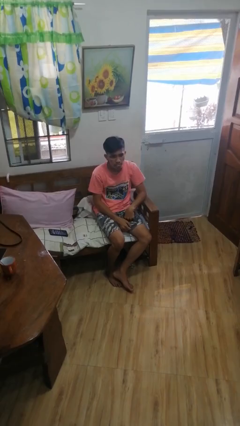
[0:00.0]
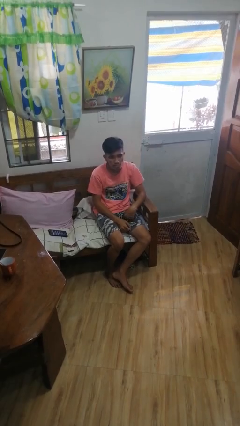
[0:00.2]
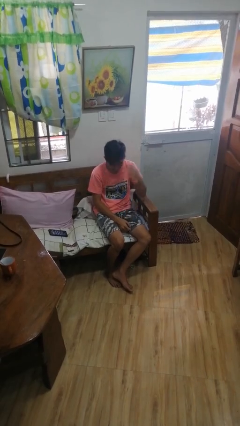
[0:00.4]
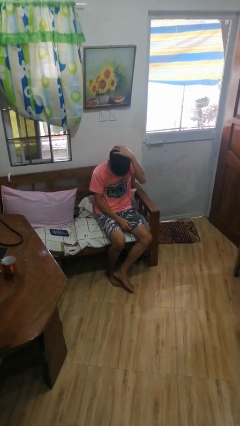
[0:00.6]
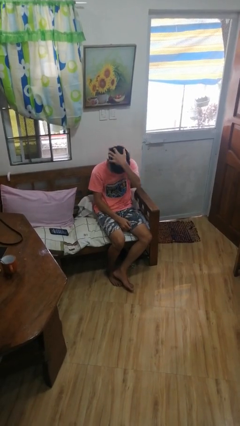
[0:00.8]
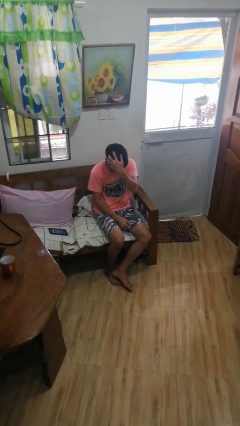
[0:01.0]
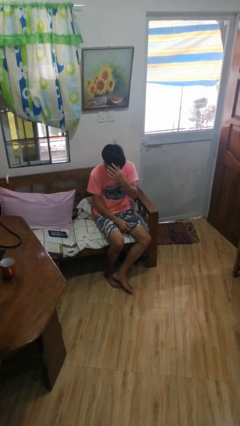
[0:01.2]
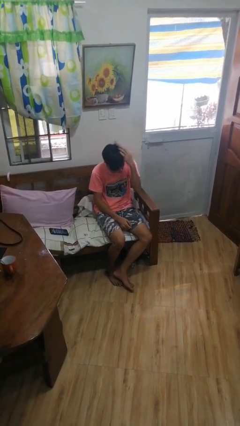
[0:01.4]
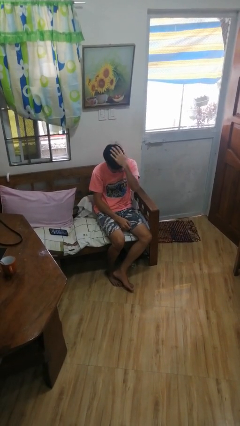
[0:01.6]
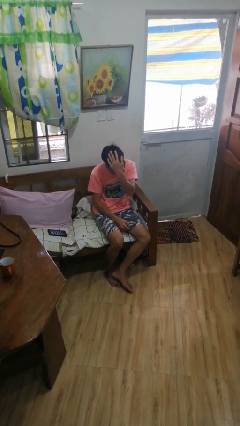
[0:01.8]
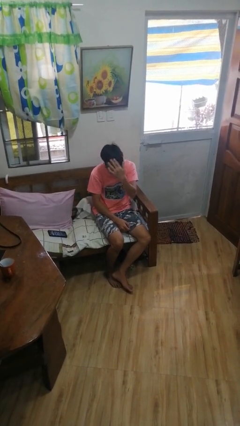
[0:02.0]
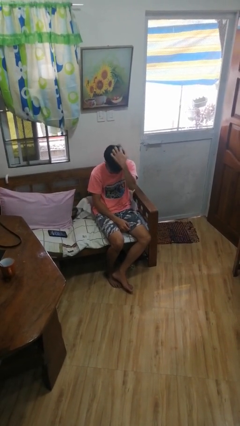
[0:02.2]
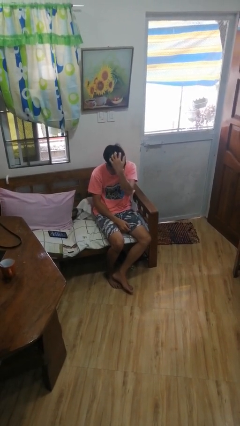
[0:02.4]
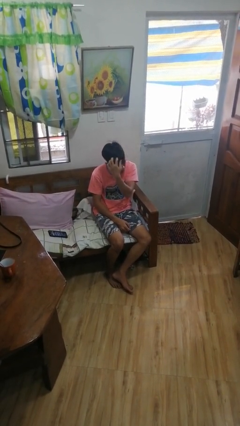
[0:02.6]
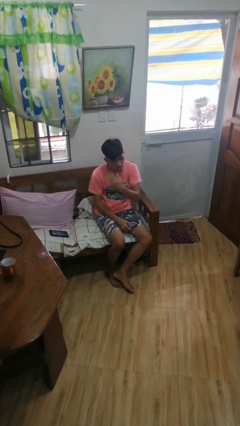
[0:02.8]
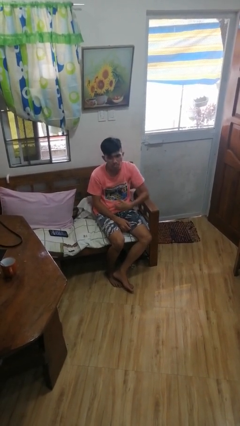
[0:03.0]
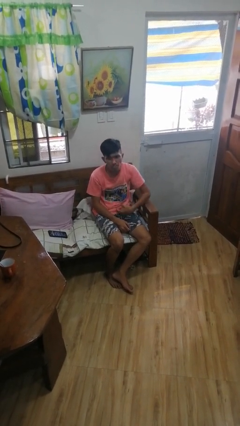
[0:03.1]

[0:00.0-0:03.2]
person strokes hair

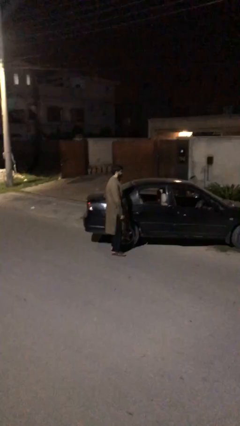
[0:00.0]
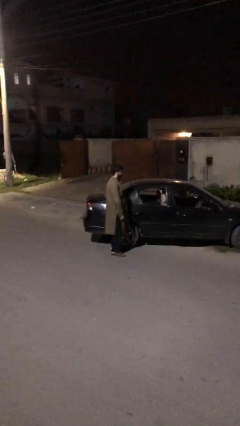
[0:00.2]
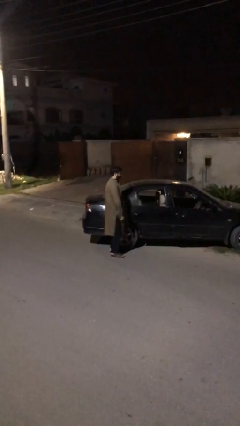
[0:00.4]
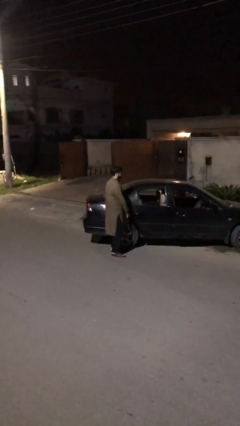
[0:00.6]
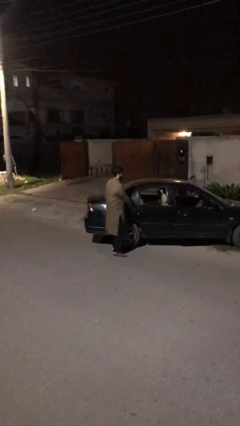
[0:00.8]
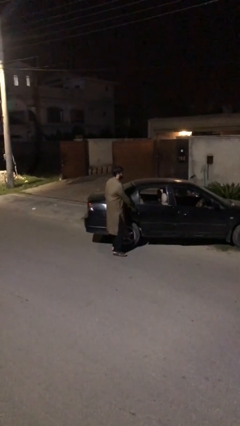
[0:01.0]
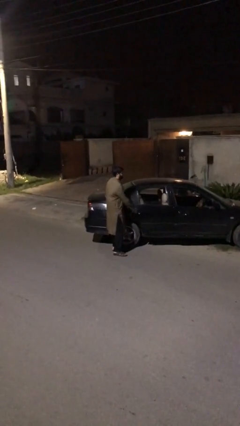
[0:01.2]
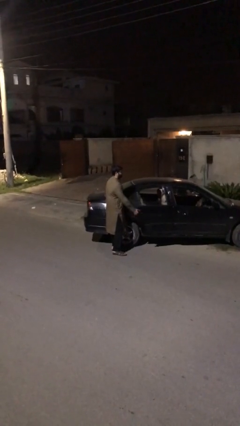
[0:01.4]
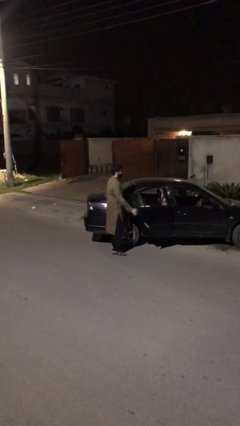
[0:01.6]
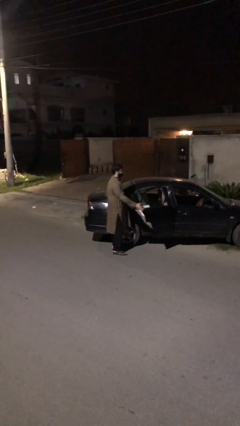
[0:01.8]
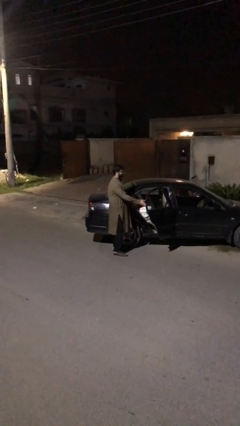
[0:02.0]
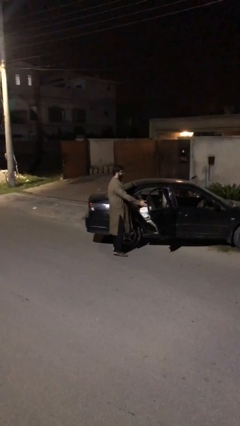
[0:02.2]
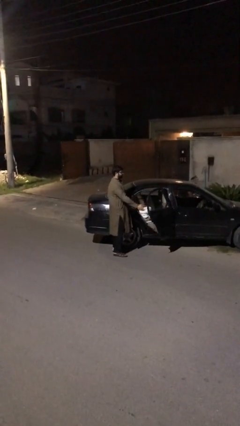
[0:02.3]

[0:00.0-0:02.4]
person opens car door

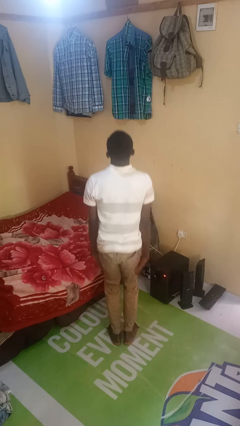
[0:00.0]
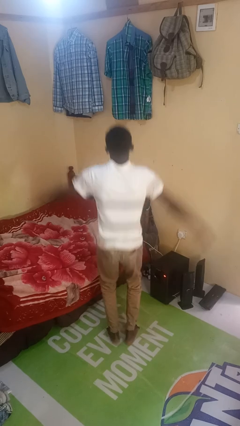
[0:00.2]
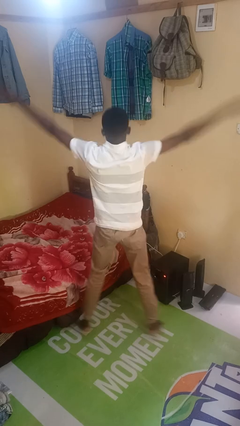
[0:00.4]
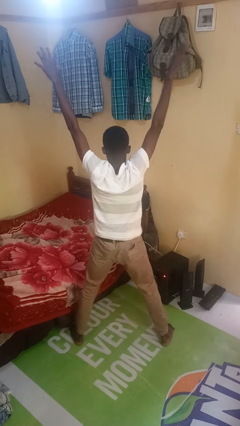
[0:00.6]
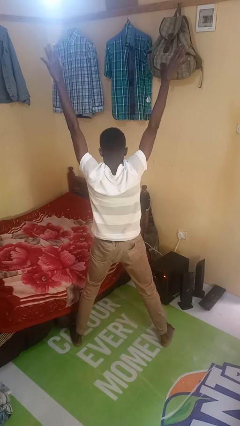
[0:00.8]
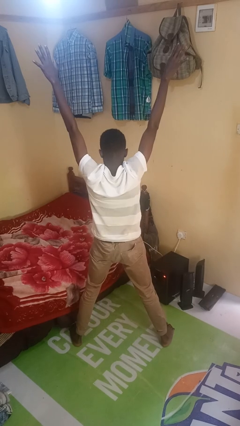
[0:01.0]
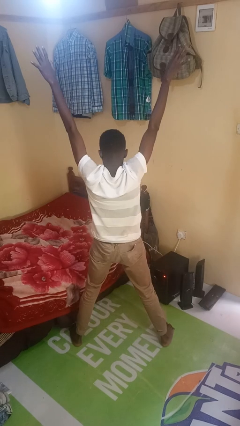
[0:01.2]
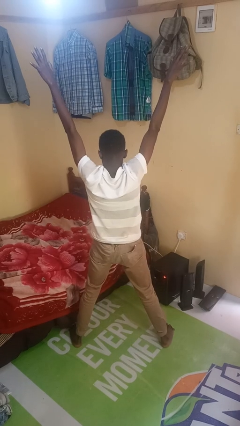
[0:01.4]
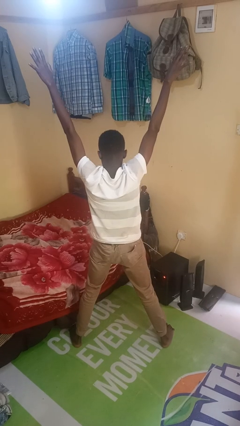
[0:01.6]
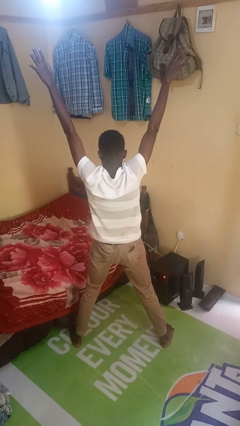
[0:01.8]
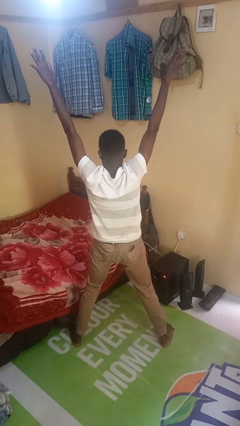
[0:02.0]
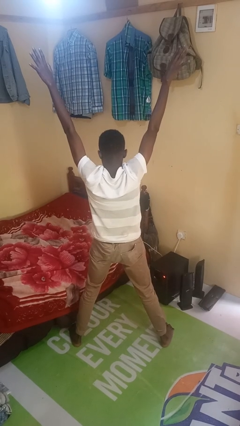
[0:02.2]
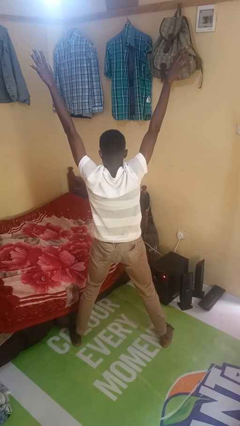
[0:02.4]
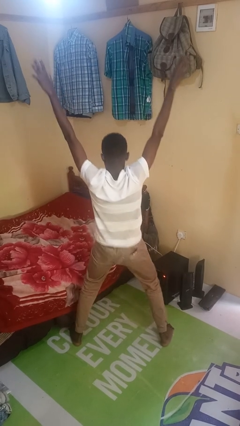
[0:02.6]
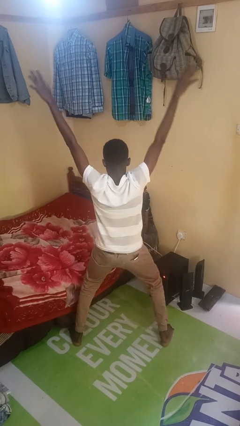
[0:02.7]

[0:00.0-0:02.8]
person exercises with jumping jacks

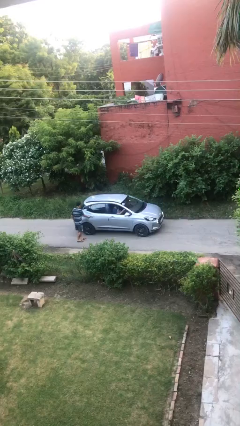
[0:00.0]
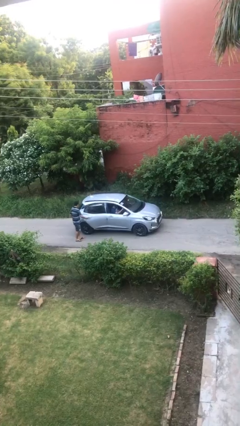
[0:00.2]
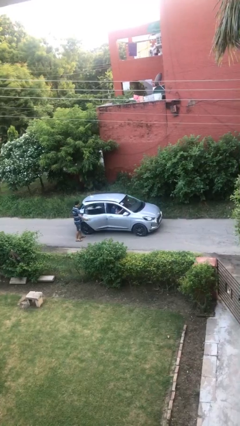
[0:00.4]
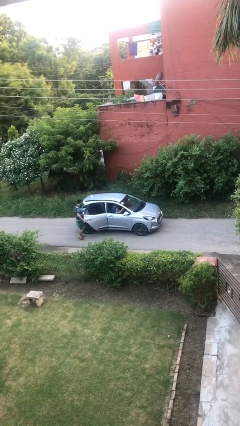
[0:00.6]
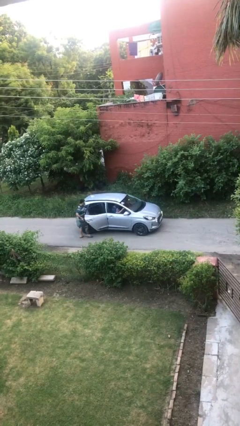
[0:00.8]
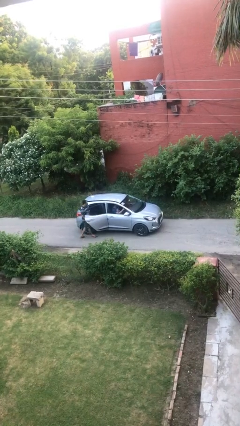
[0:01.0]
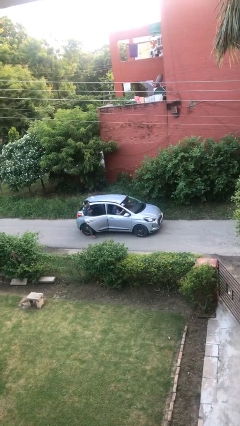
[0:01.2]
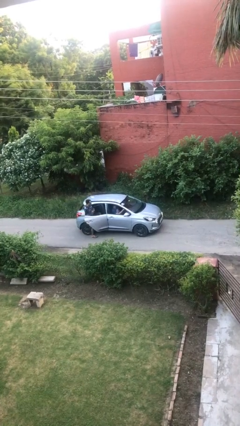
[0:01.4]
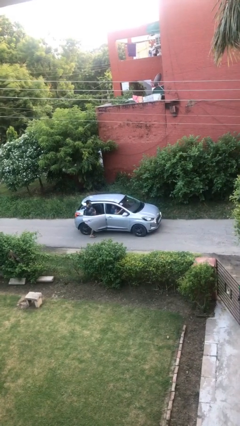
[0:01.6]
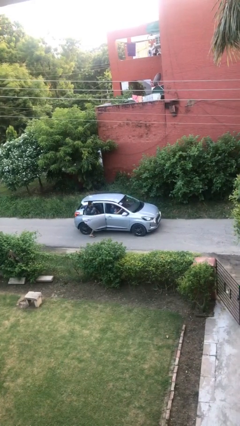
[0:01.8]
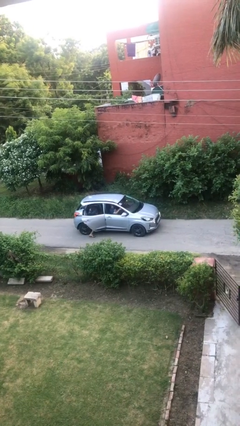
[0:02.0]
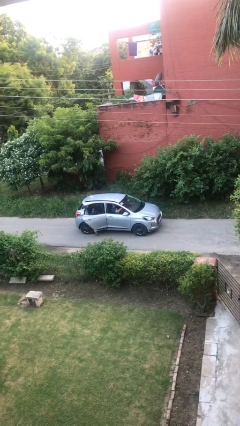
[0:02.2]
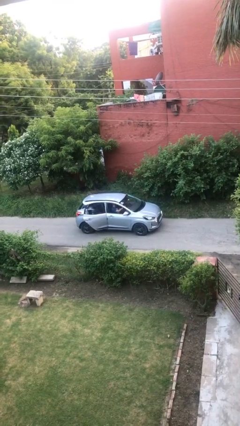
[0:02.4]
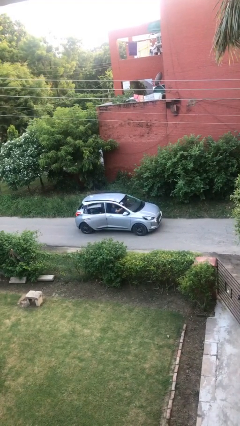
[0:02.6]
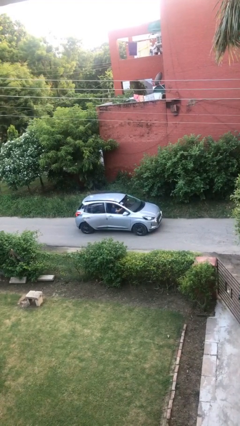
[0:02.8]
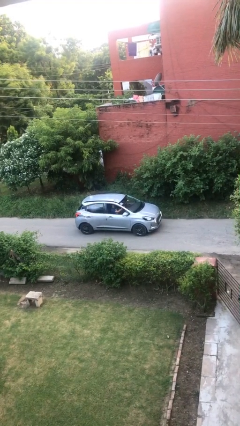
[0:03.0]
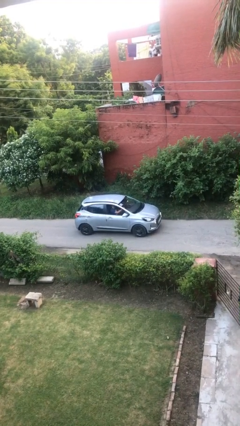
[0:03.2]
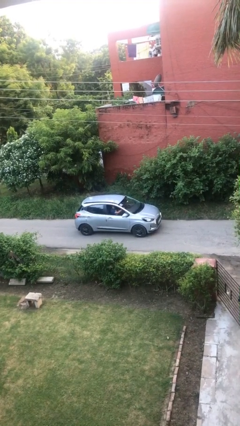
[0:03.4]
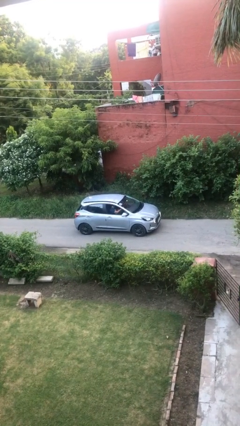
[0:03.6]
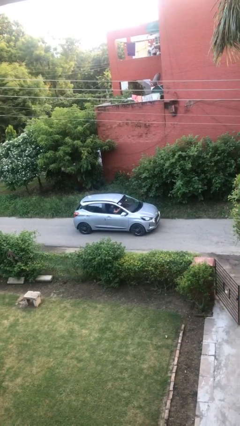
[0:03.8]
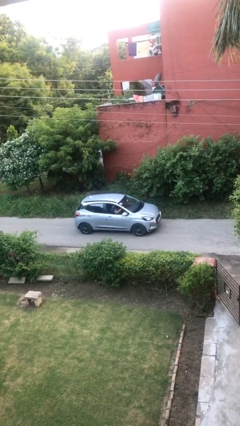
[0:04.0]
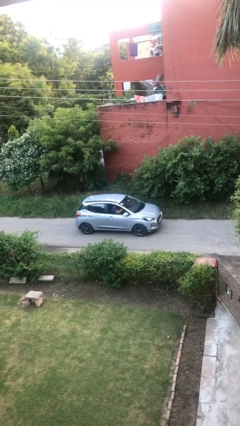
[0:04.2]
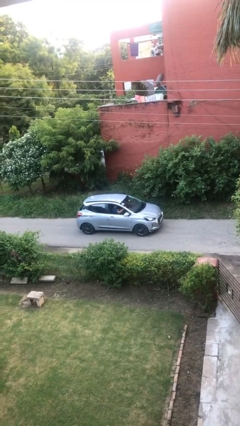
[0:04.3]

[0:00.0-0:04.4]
car picks up person

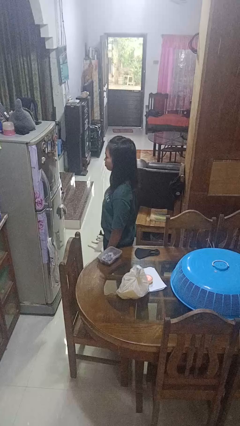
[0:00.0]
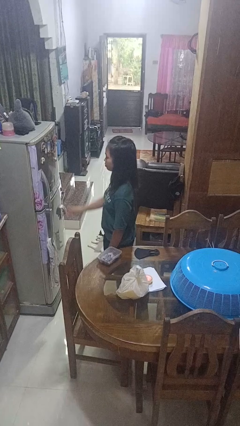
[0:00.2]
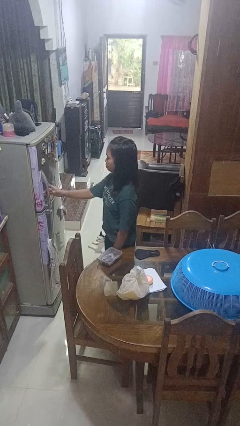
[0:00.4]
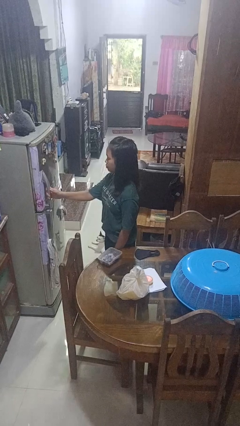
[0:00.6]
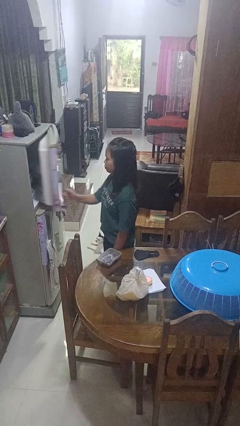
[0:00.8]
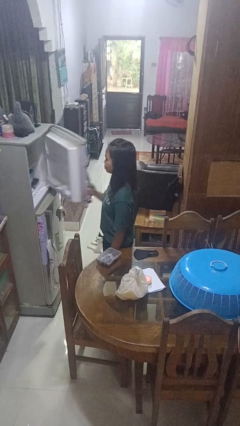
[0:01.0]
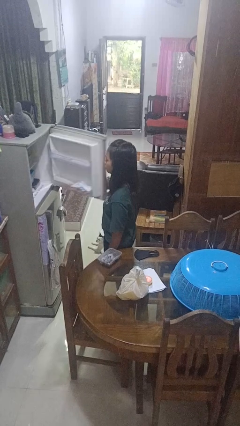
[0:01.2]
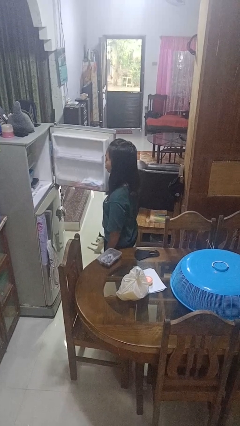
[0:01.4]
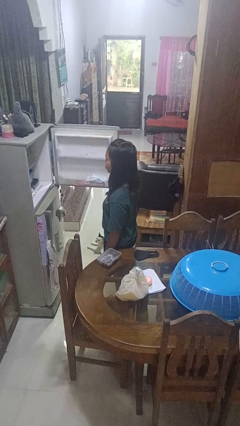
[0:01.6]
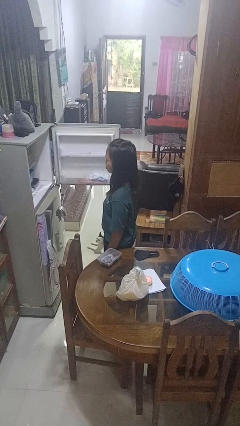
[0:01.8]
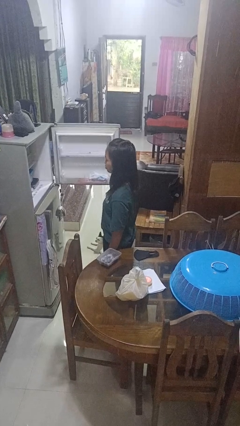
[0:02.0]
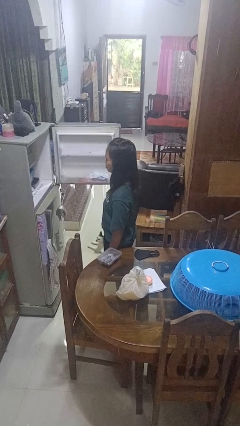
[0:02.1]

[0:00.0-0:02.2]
person opens refrigerator

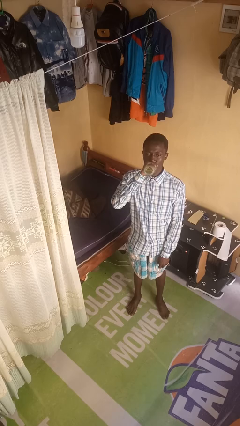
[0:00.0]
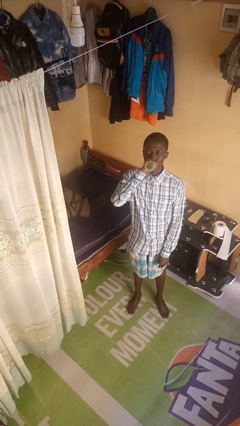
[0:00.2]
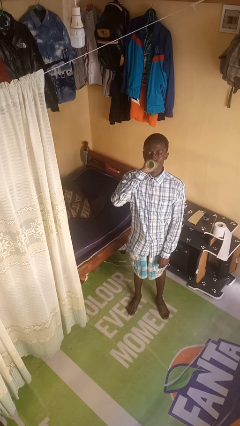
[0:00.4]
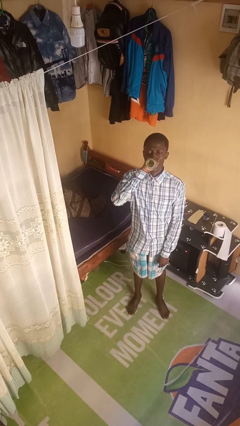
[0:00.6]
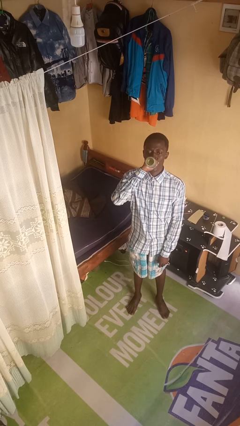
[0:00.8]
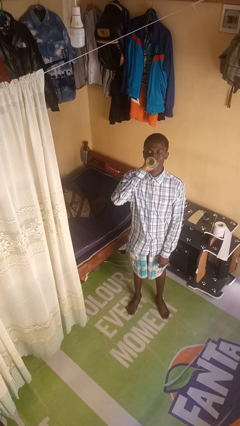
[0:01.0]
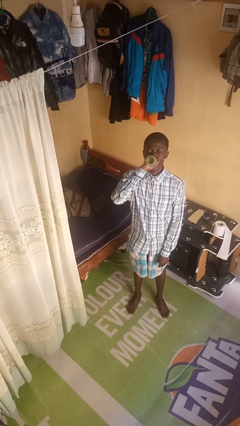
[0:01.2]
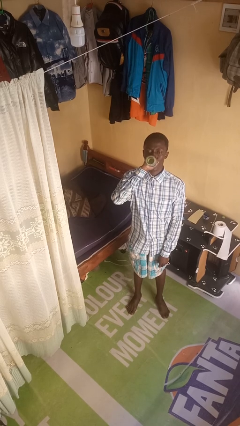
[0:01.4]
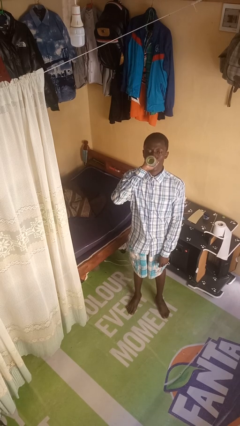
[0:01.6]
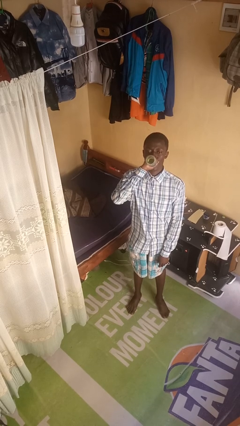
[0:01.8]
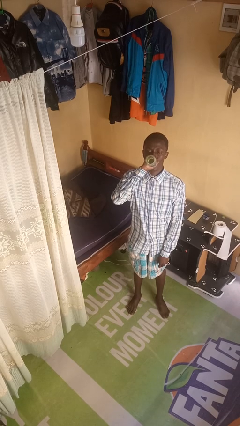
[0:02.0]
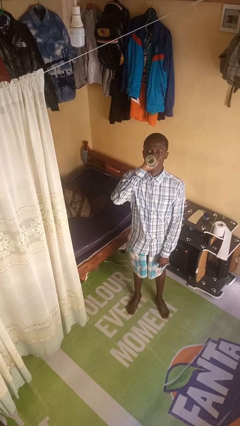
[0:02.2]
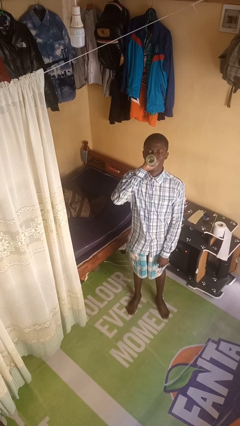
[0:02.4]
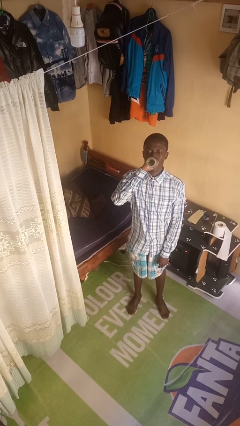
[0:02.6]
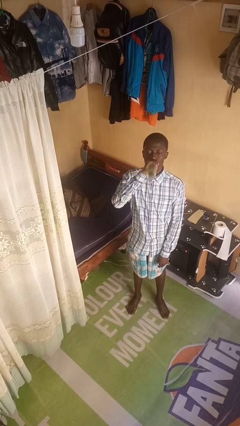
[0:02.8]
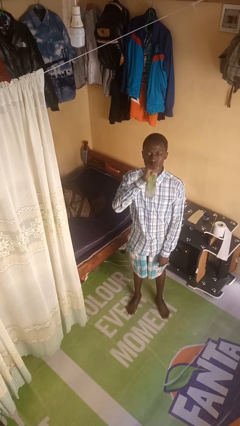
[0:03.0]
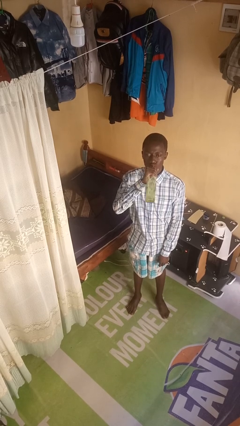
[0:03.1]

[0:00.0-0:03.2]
person drinks from bottle
